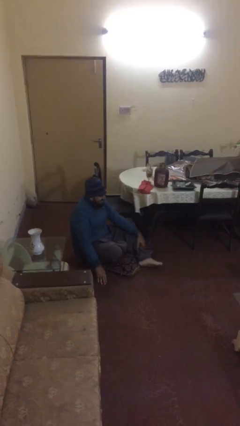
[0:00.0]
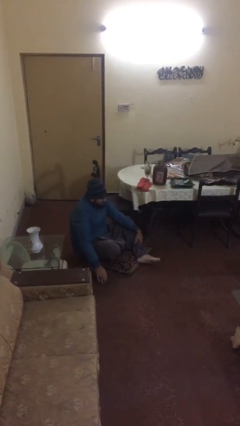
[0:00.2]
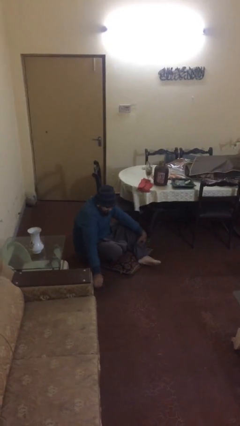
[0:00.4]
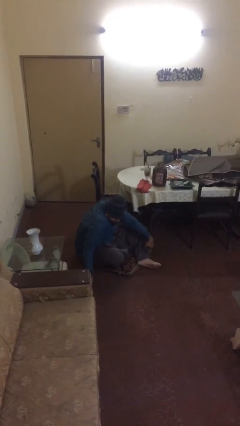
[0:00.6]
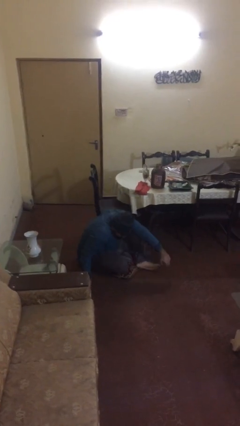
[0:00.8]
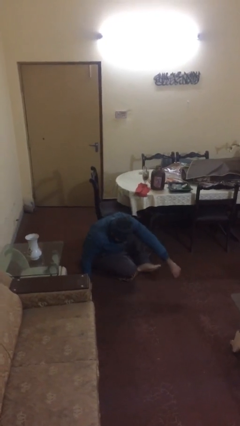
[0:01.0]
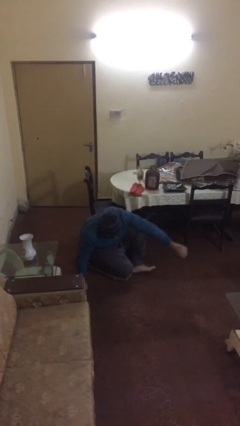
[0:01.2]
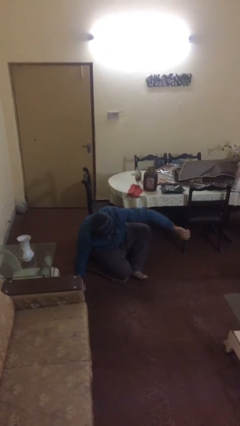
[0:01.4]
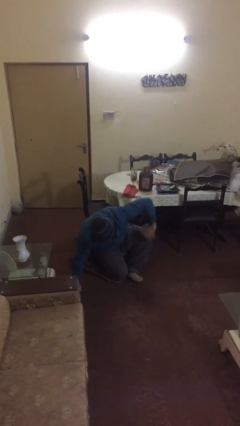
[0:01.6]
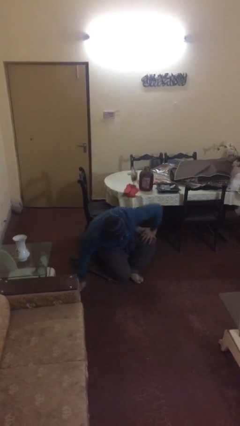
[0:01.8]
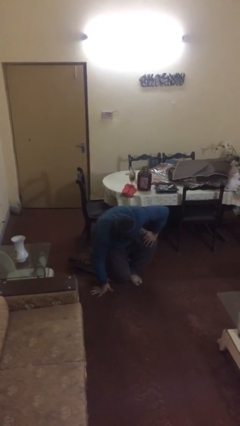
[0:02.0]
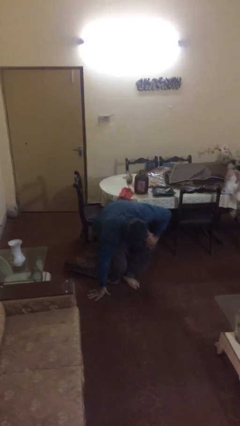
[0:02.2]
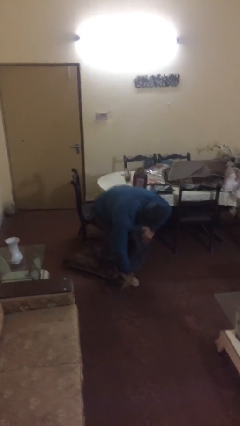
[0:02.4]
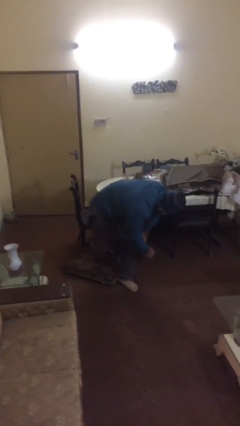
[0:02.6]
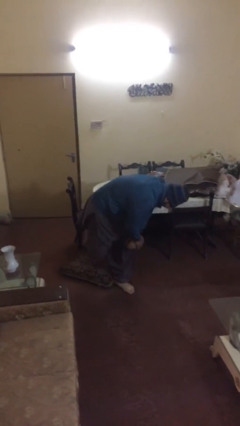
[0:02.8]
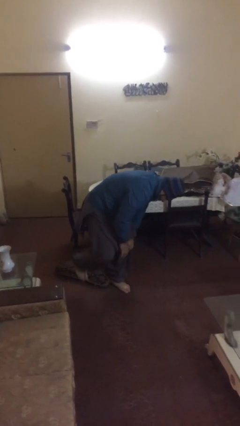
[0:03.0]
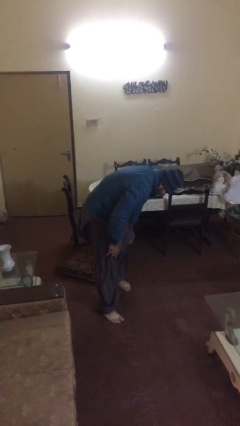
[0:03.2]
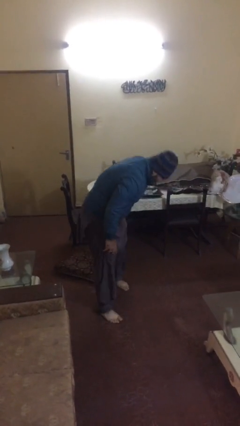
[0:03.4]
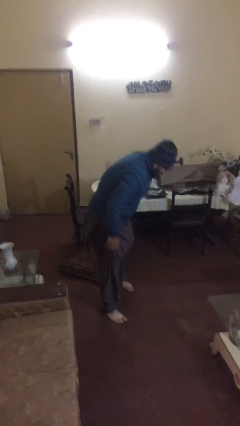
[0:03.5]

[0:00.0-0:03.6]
person stands up

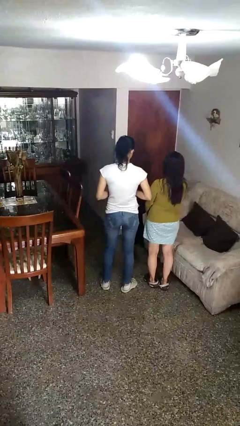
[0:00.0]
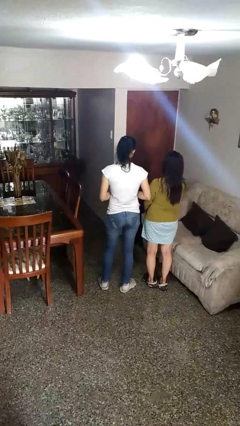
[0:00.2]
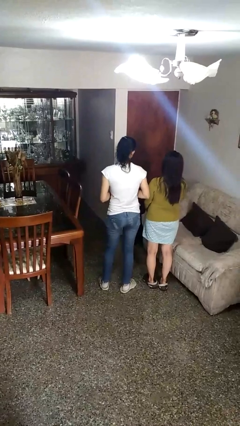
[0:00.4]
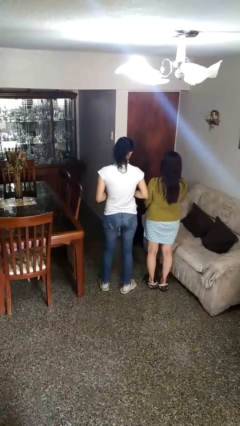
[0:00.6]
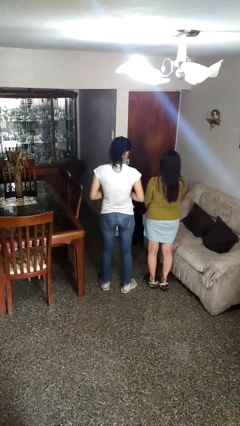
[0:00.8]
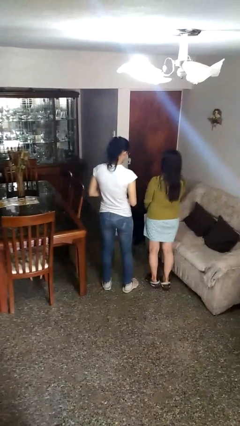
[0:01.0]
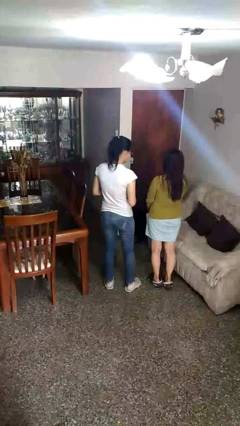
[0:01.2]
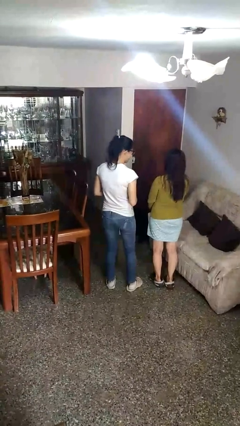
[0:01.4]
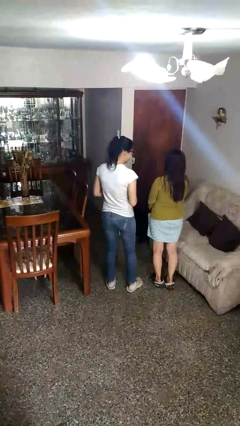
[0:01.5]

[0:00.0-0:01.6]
person nudges person with elbow

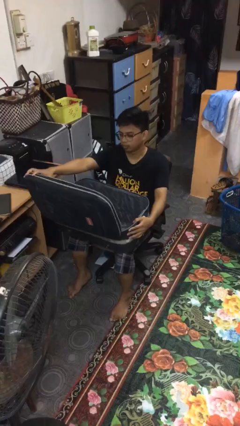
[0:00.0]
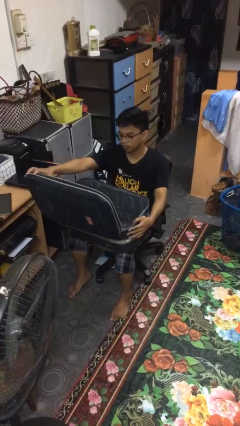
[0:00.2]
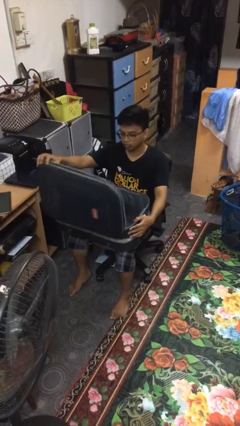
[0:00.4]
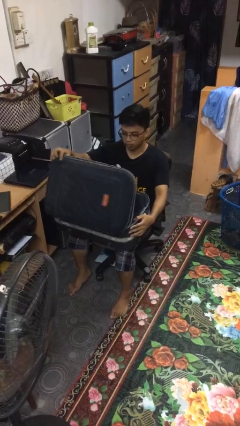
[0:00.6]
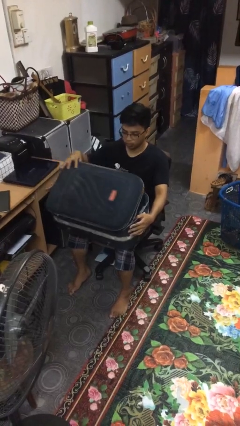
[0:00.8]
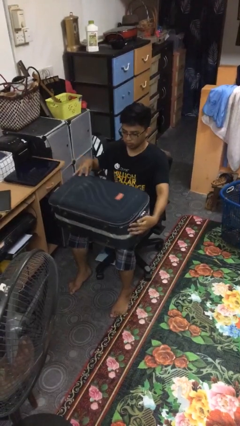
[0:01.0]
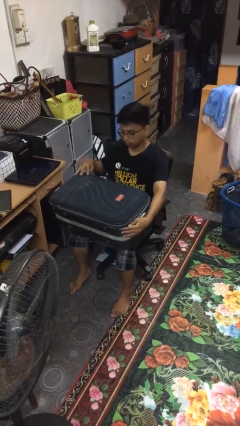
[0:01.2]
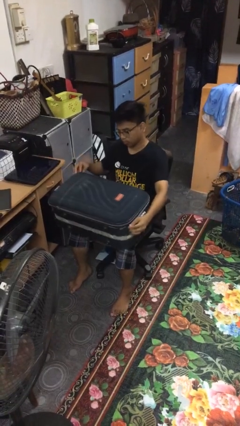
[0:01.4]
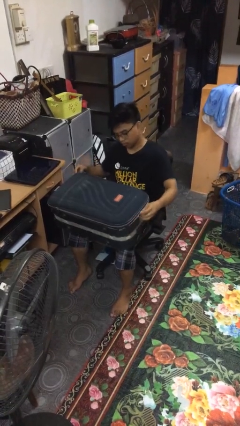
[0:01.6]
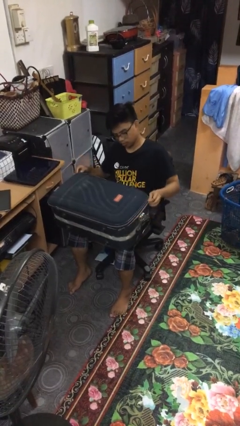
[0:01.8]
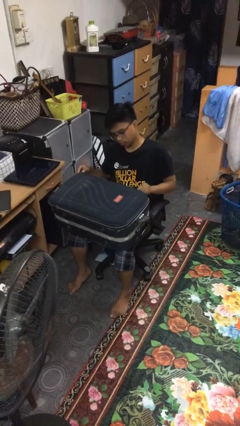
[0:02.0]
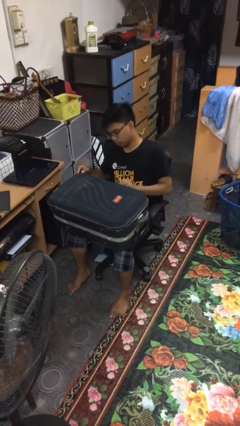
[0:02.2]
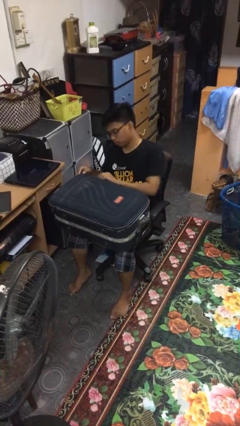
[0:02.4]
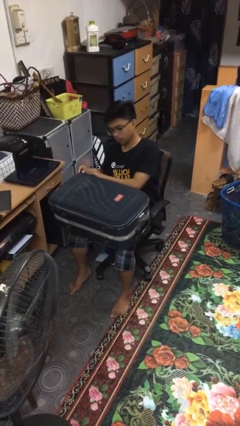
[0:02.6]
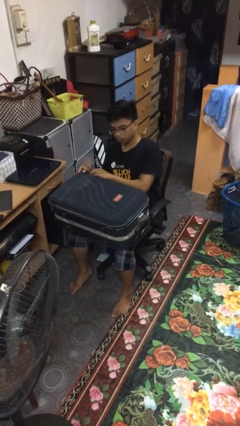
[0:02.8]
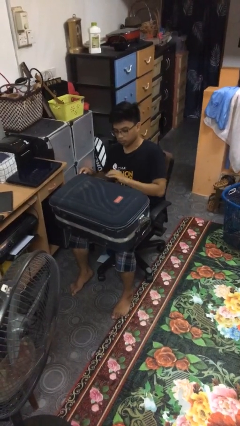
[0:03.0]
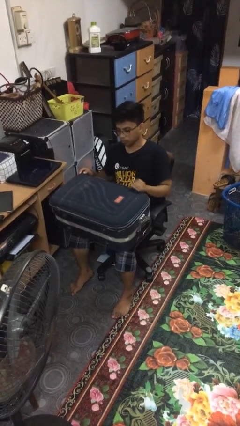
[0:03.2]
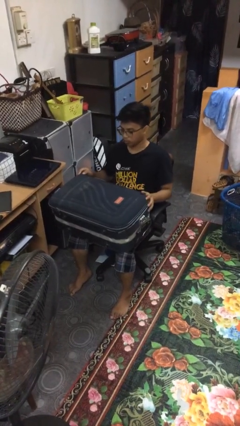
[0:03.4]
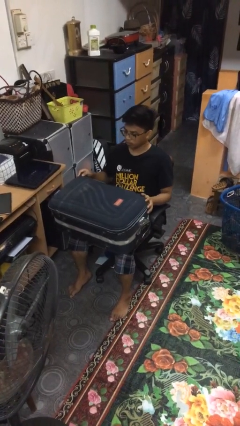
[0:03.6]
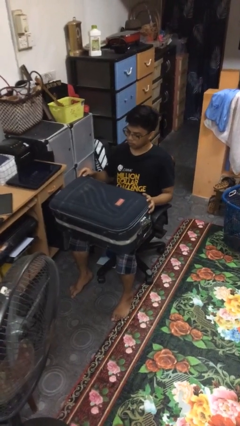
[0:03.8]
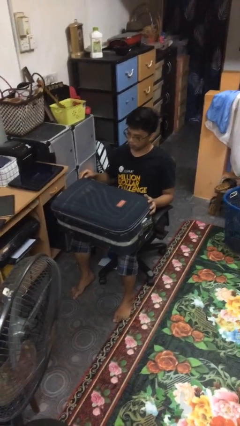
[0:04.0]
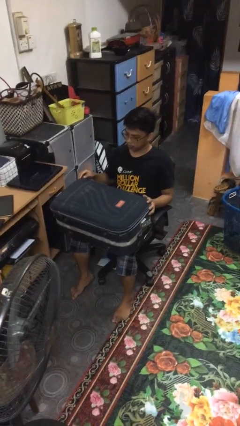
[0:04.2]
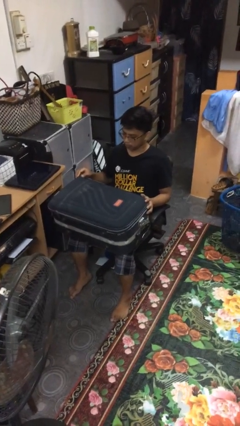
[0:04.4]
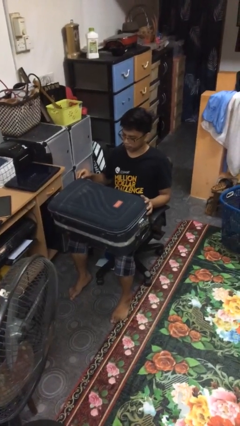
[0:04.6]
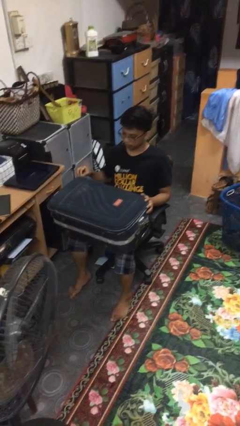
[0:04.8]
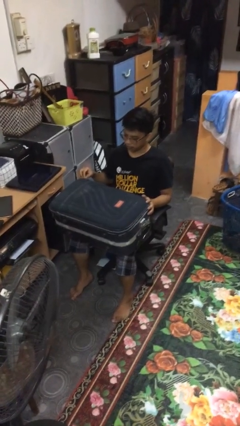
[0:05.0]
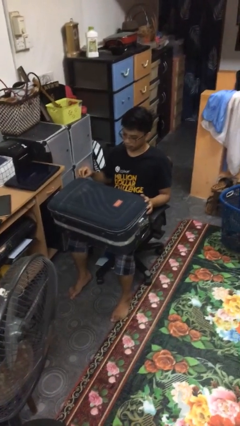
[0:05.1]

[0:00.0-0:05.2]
person closes suitcase

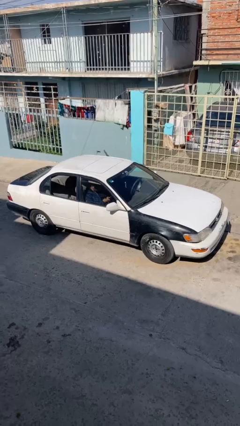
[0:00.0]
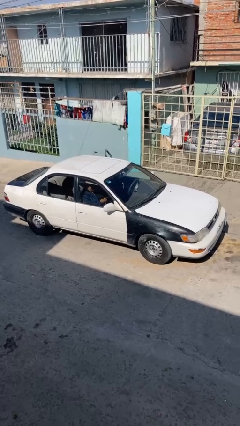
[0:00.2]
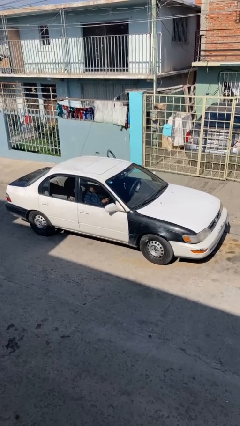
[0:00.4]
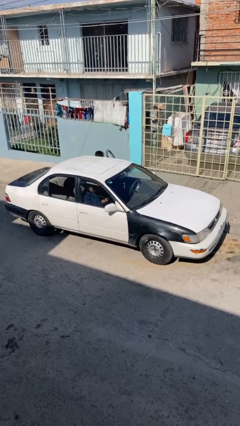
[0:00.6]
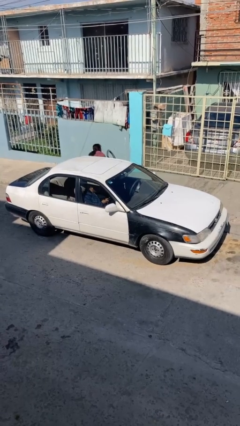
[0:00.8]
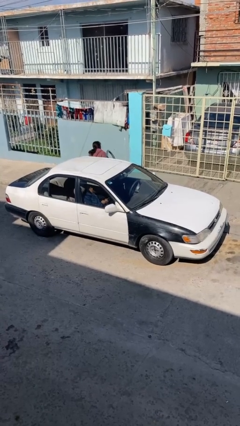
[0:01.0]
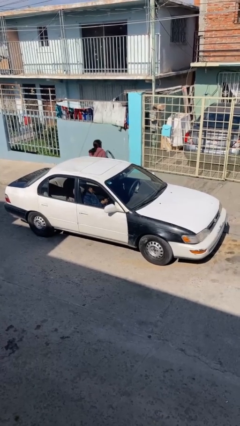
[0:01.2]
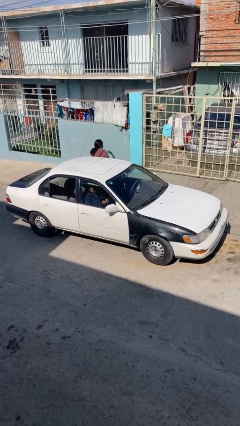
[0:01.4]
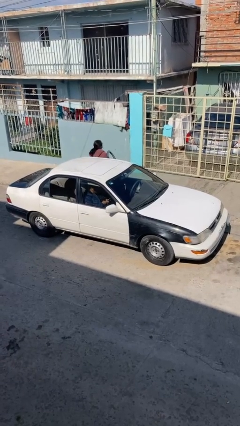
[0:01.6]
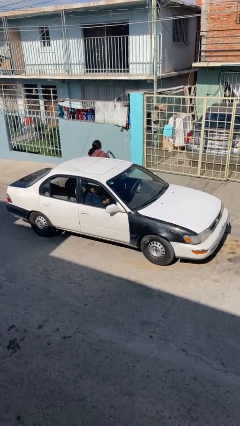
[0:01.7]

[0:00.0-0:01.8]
car drops off person

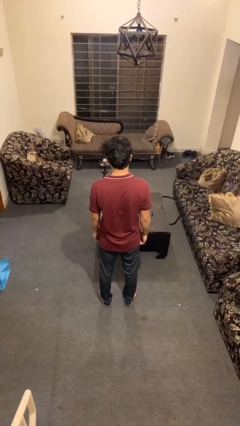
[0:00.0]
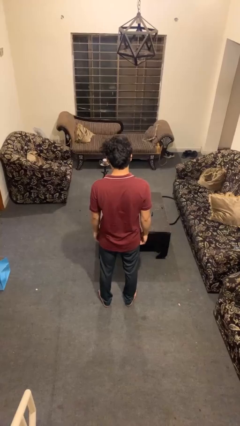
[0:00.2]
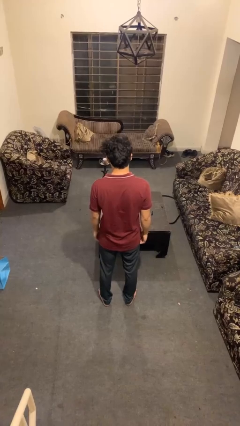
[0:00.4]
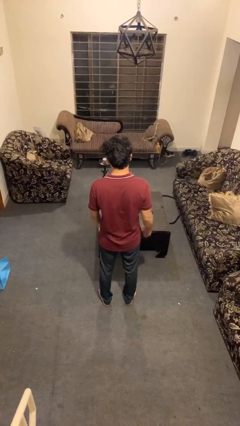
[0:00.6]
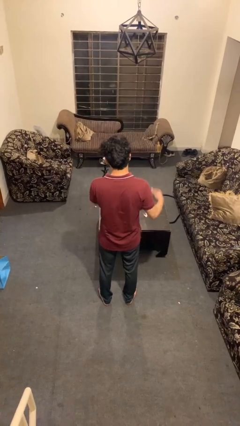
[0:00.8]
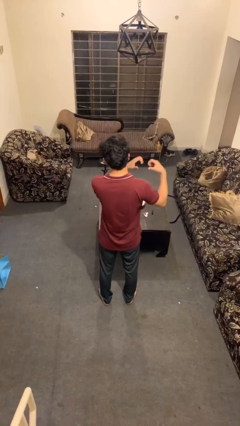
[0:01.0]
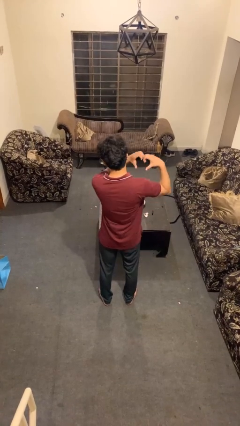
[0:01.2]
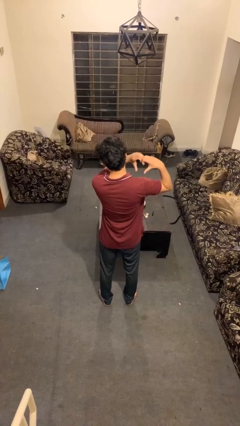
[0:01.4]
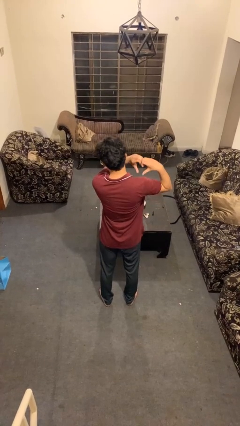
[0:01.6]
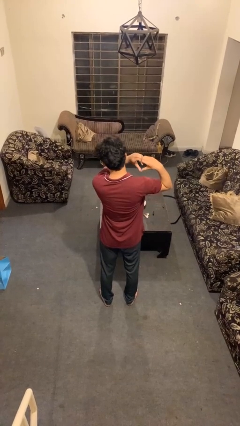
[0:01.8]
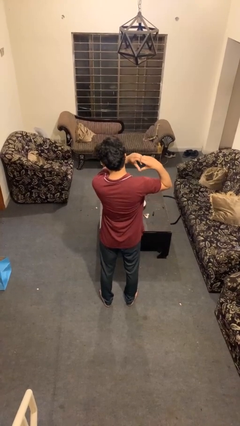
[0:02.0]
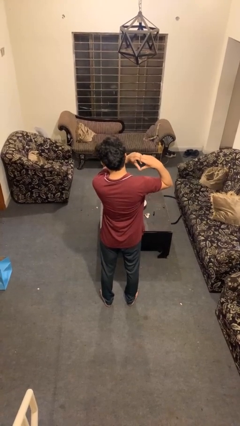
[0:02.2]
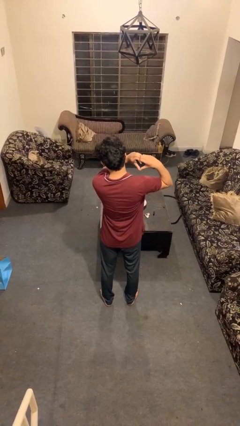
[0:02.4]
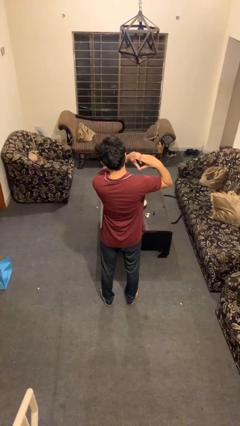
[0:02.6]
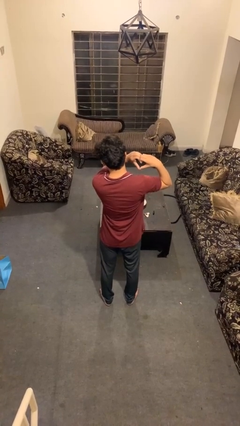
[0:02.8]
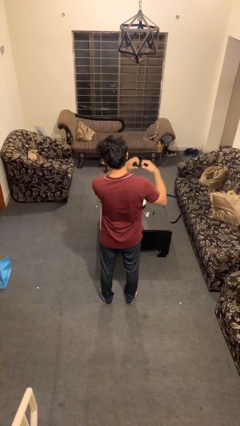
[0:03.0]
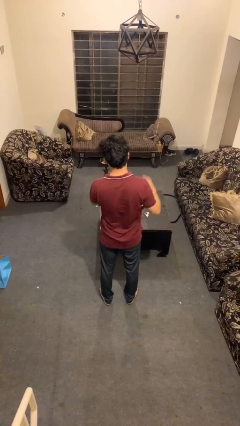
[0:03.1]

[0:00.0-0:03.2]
person gestures heart

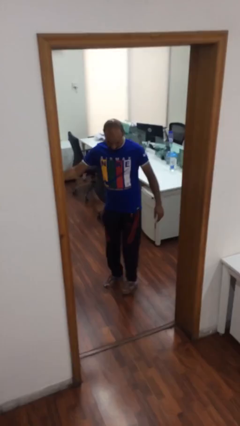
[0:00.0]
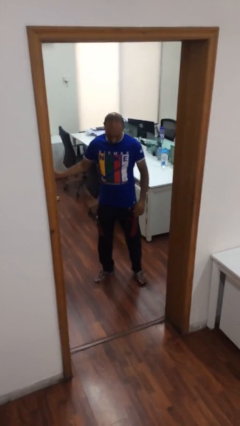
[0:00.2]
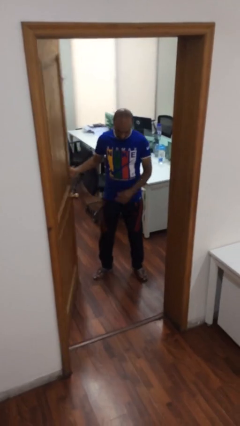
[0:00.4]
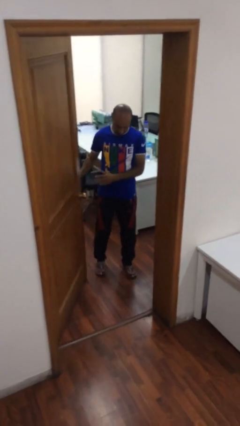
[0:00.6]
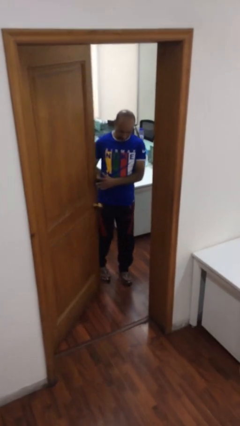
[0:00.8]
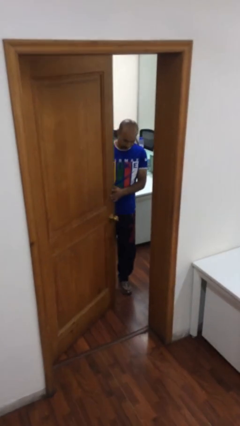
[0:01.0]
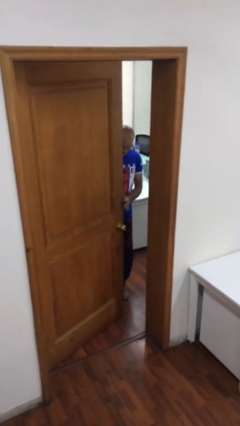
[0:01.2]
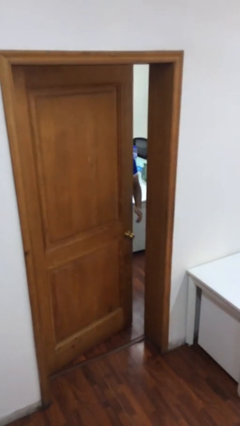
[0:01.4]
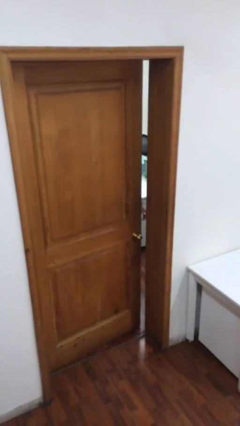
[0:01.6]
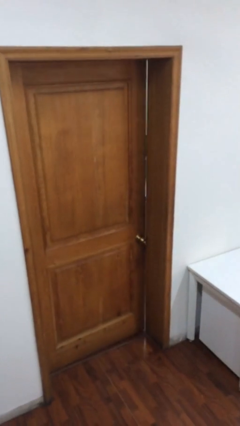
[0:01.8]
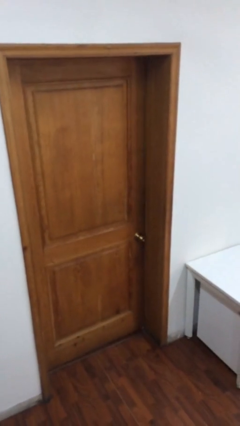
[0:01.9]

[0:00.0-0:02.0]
person closes facility door
